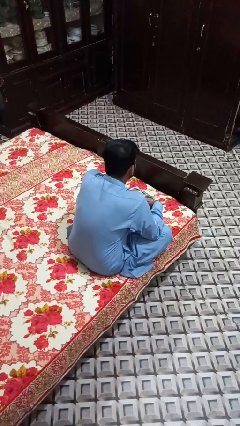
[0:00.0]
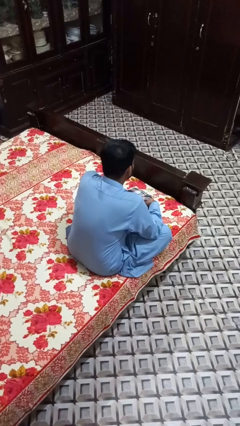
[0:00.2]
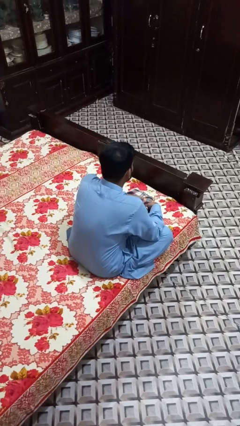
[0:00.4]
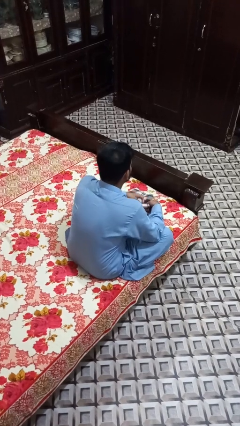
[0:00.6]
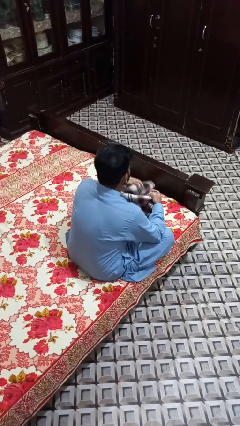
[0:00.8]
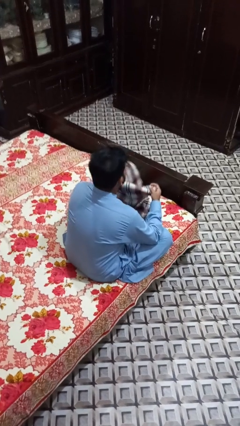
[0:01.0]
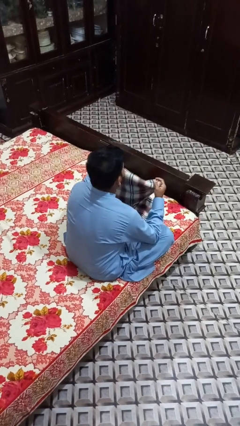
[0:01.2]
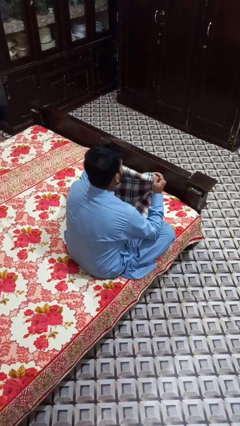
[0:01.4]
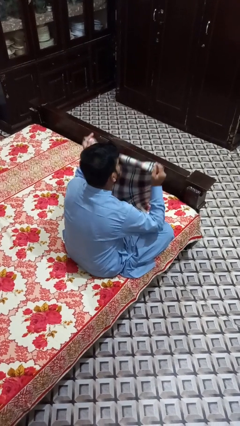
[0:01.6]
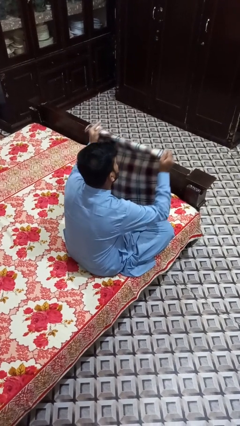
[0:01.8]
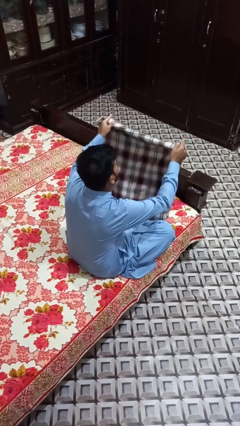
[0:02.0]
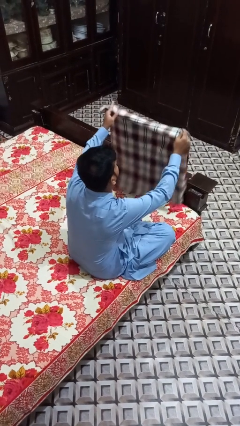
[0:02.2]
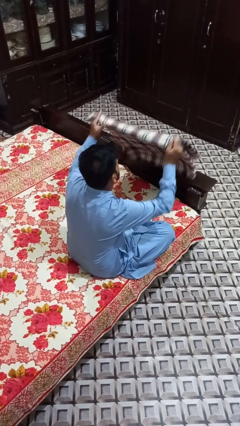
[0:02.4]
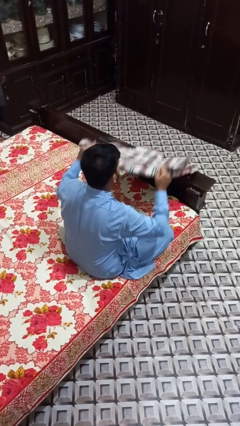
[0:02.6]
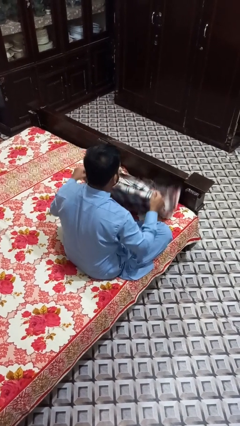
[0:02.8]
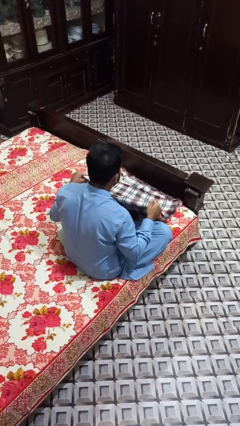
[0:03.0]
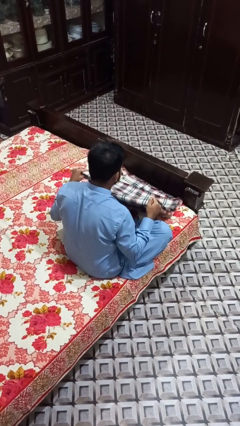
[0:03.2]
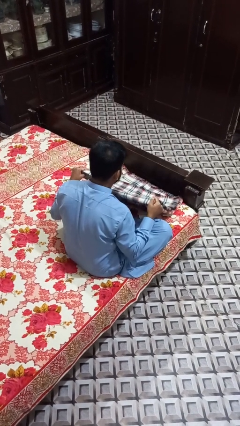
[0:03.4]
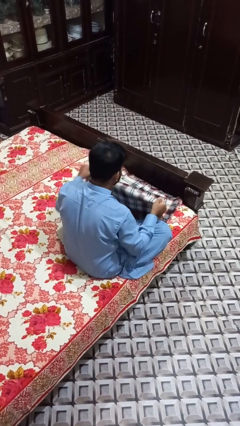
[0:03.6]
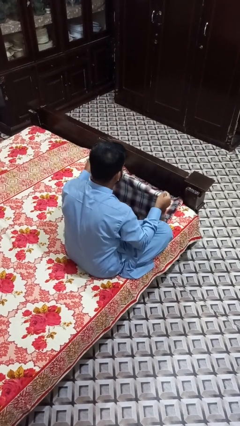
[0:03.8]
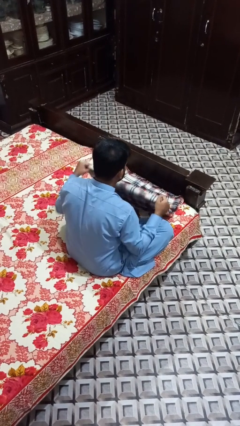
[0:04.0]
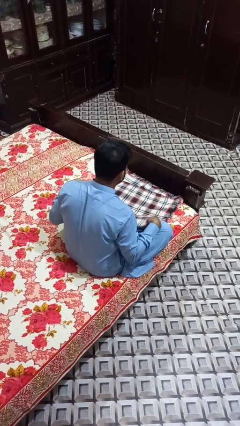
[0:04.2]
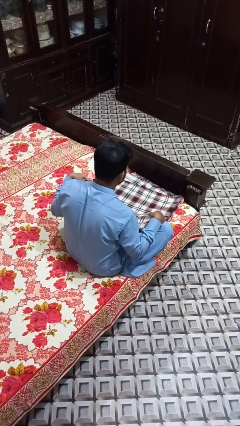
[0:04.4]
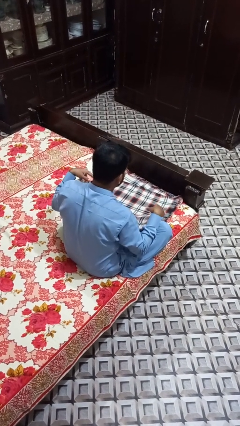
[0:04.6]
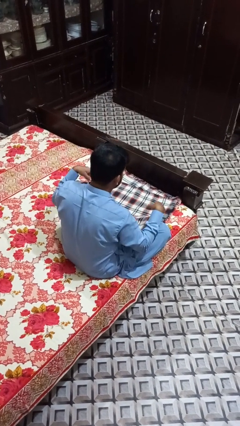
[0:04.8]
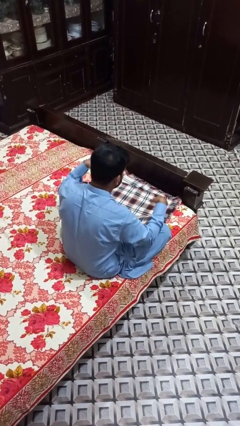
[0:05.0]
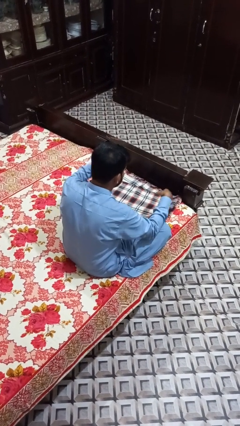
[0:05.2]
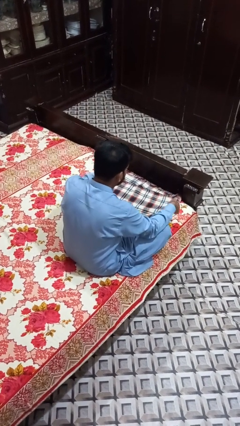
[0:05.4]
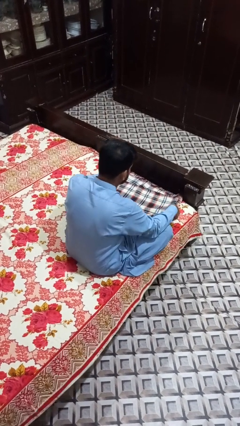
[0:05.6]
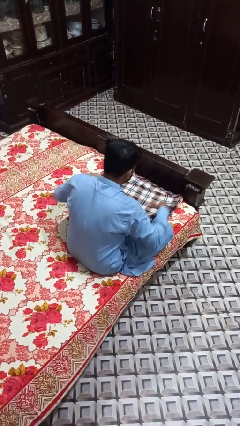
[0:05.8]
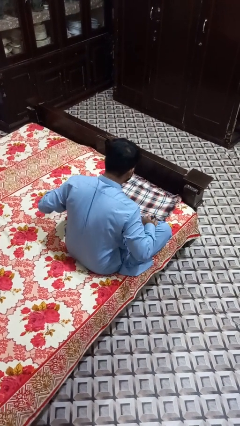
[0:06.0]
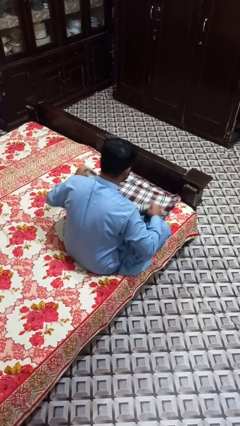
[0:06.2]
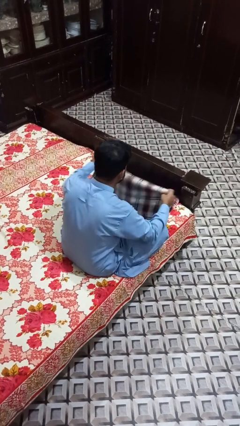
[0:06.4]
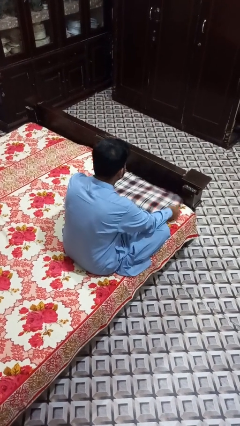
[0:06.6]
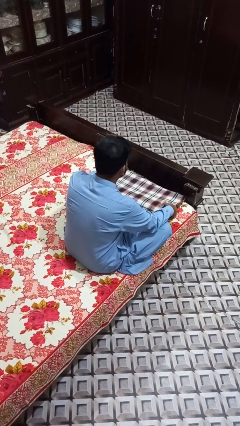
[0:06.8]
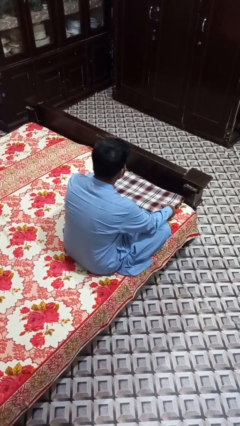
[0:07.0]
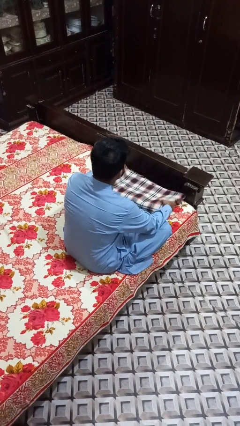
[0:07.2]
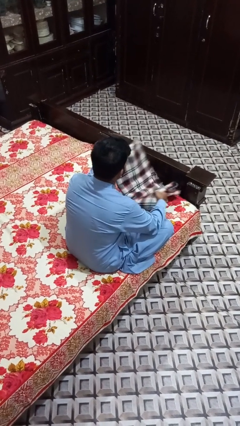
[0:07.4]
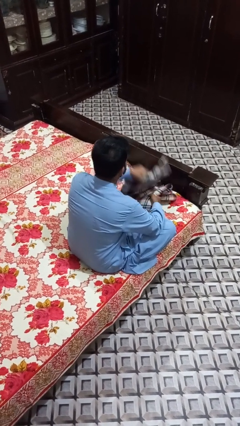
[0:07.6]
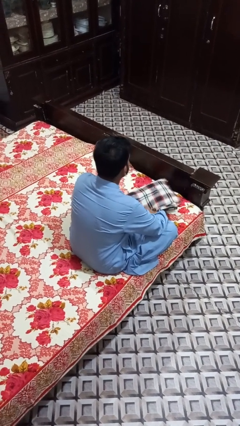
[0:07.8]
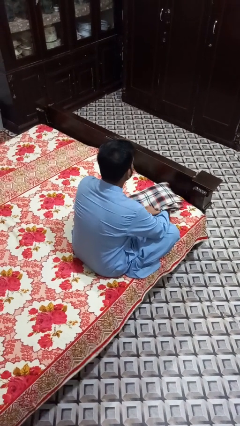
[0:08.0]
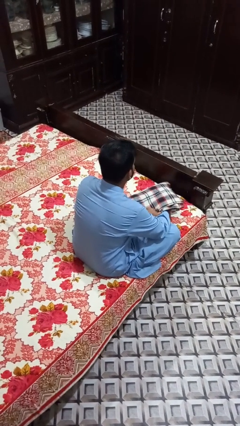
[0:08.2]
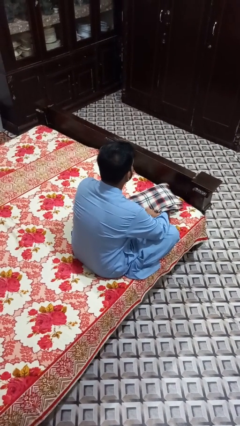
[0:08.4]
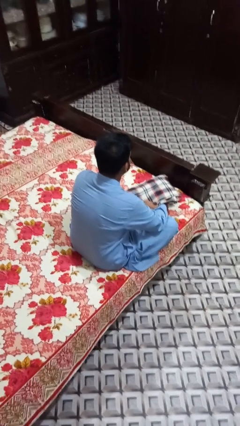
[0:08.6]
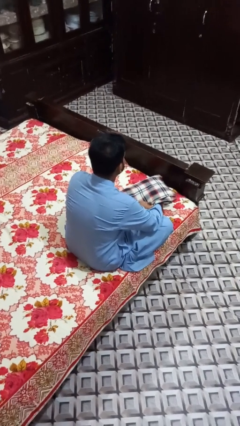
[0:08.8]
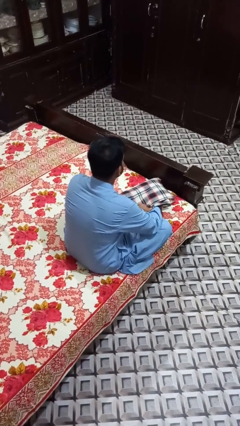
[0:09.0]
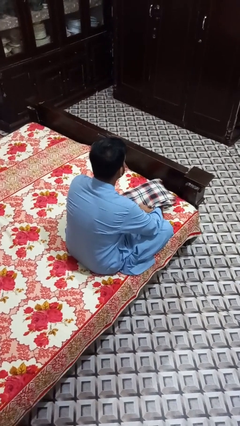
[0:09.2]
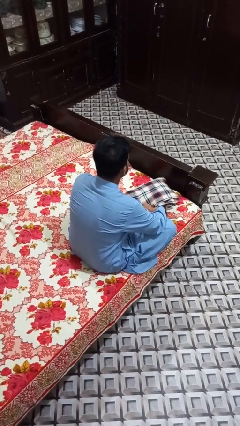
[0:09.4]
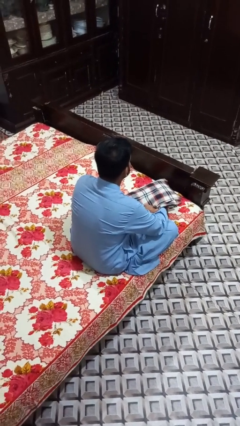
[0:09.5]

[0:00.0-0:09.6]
person folds blanket

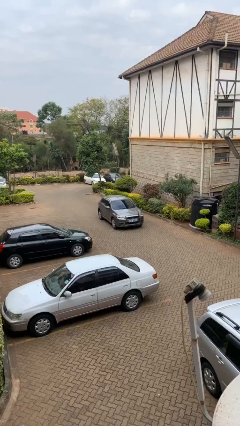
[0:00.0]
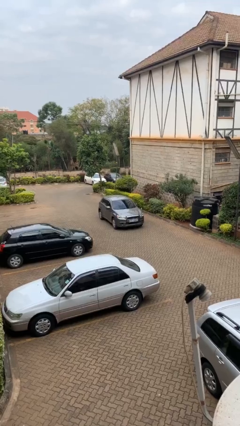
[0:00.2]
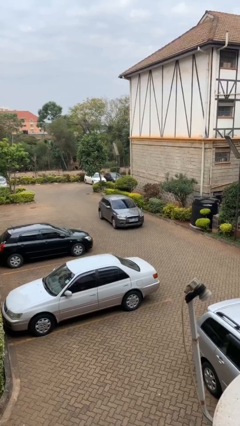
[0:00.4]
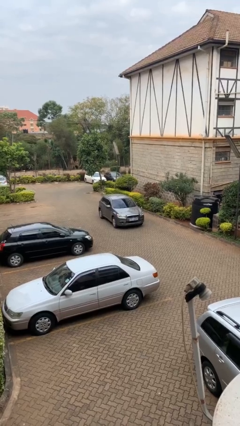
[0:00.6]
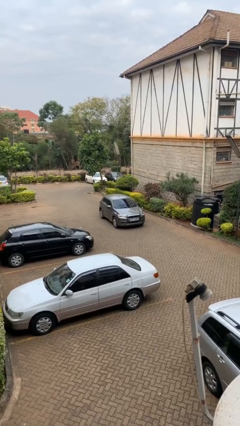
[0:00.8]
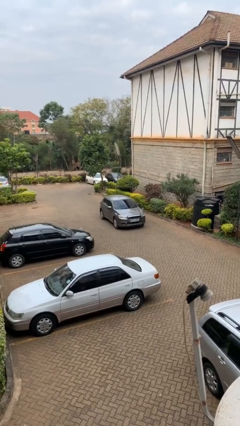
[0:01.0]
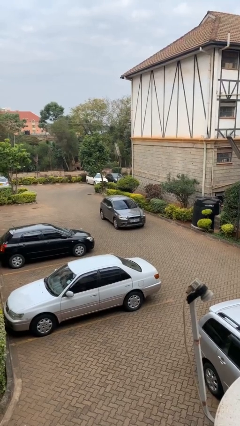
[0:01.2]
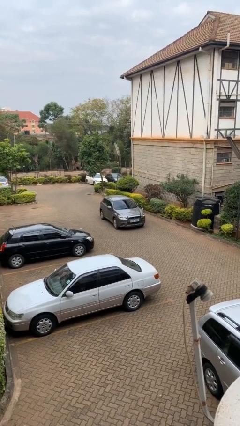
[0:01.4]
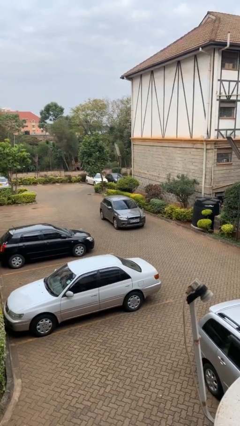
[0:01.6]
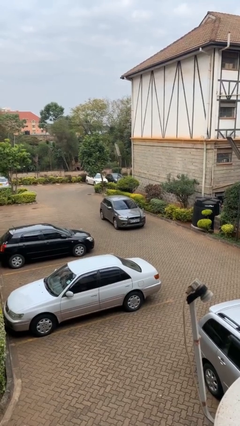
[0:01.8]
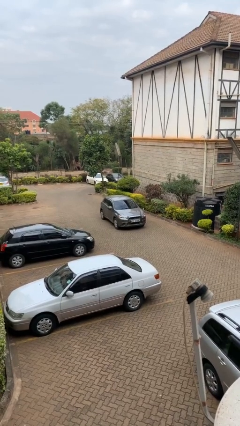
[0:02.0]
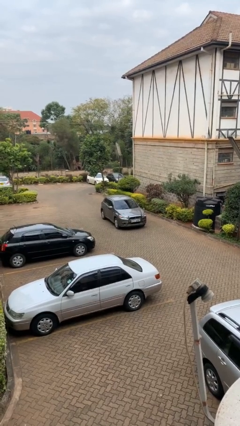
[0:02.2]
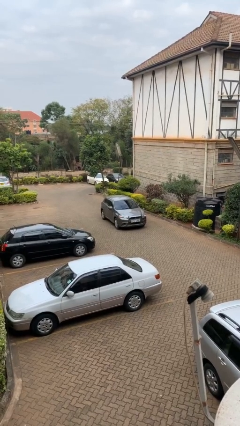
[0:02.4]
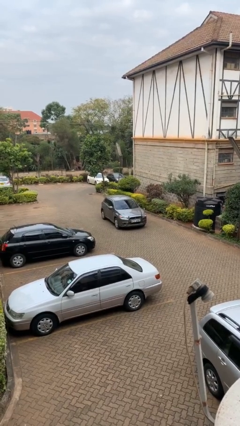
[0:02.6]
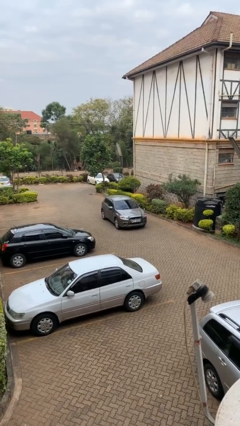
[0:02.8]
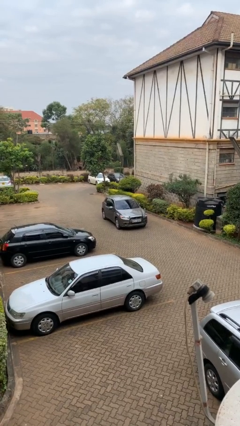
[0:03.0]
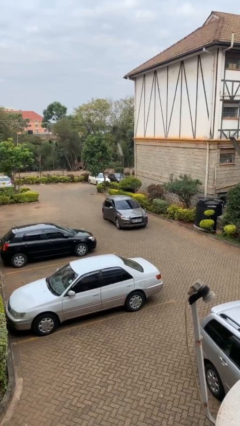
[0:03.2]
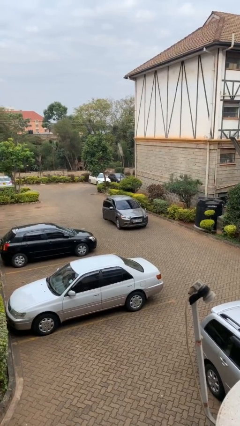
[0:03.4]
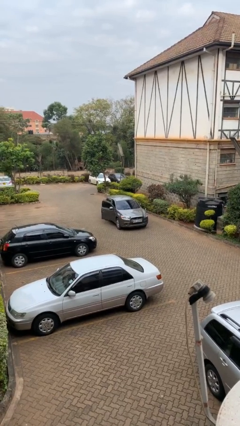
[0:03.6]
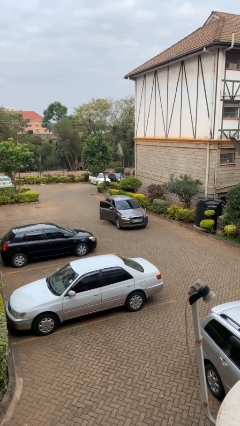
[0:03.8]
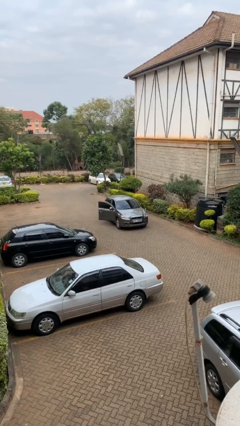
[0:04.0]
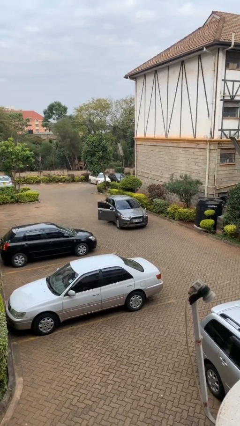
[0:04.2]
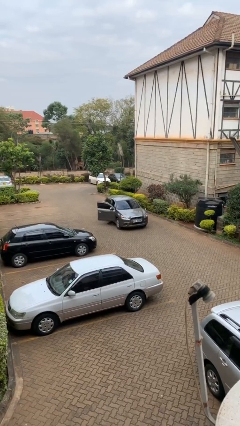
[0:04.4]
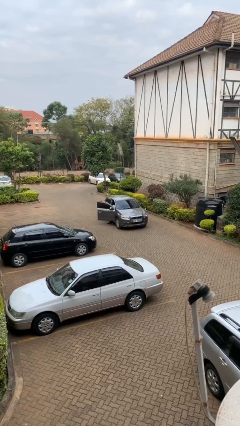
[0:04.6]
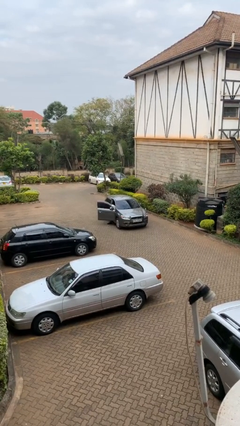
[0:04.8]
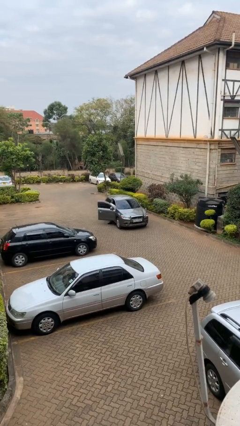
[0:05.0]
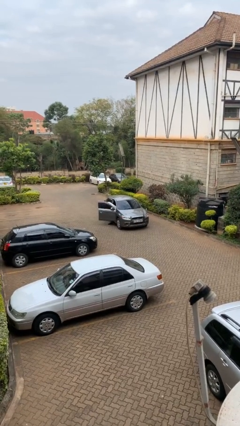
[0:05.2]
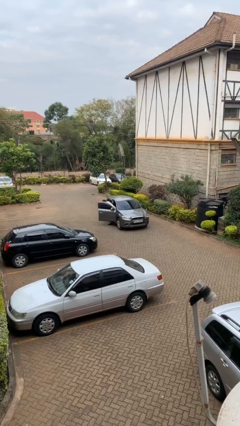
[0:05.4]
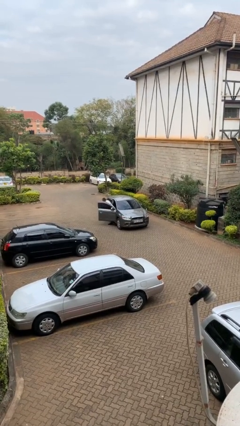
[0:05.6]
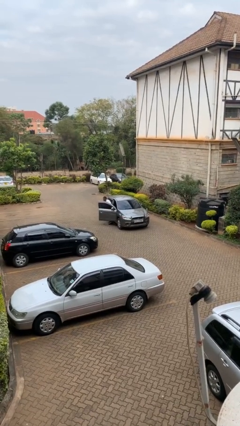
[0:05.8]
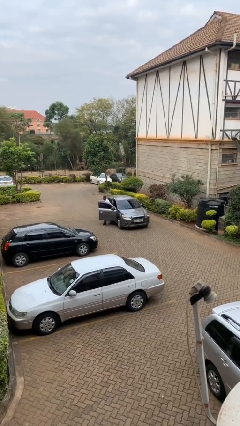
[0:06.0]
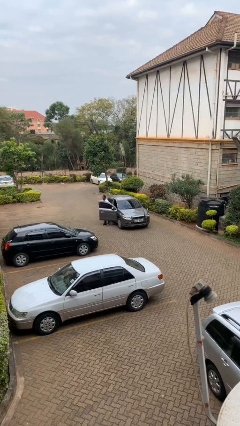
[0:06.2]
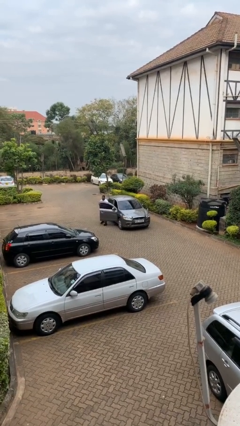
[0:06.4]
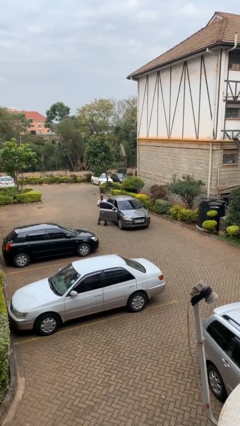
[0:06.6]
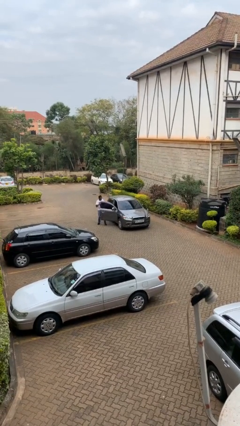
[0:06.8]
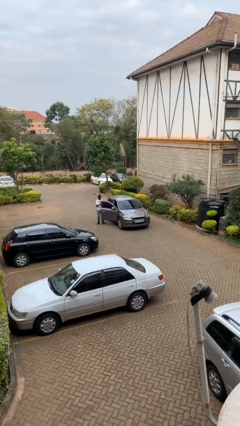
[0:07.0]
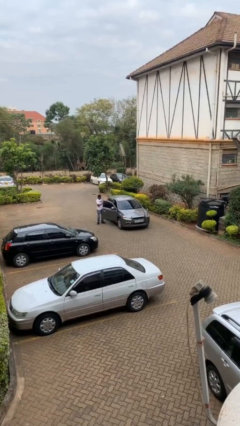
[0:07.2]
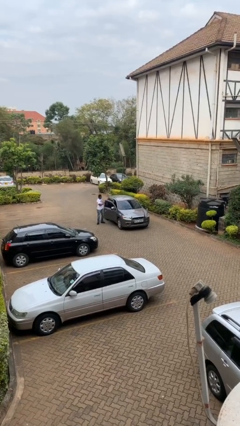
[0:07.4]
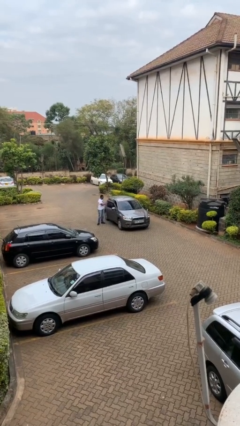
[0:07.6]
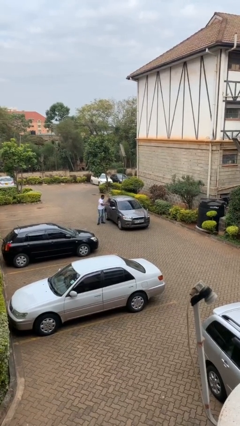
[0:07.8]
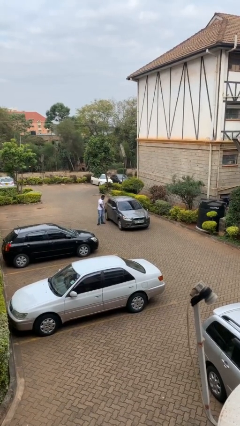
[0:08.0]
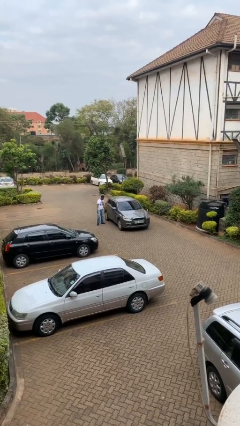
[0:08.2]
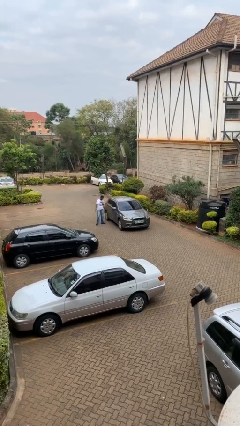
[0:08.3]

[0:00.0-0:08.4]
car drops off person
